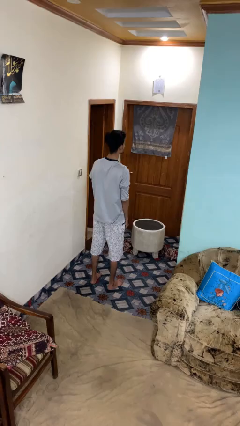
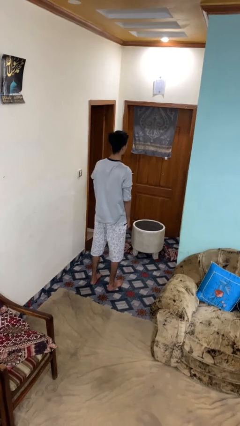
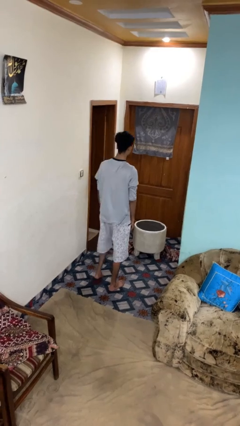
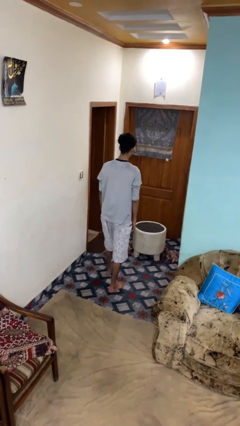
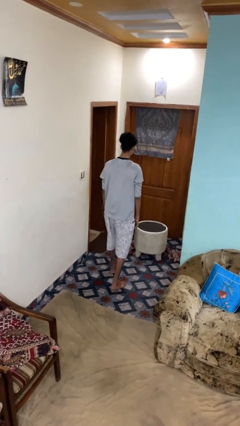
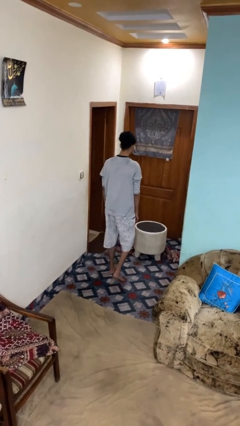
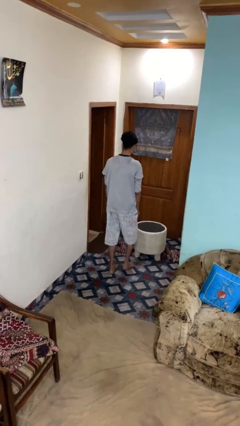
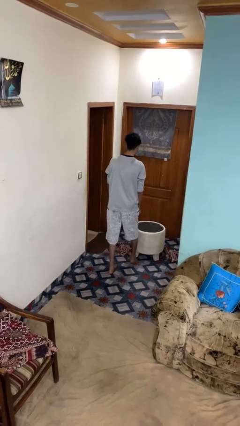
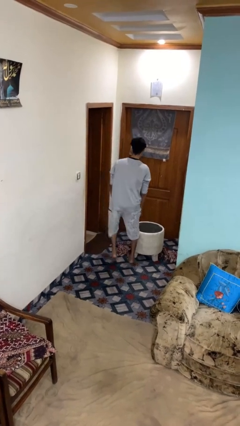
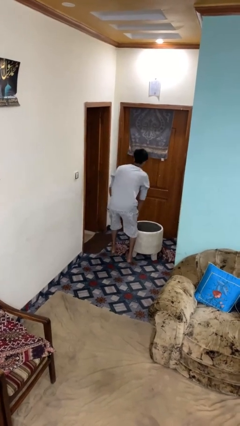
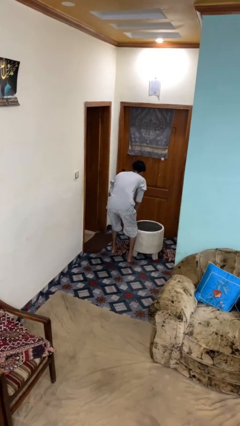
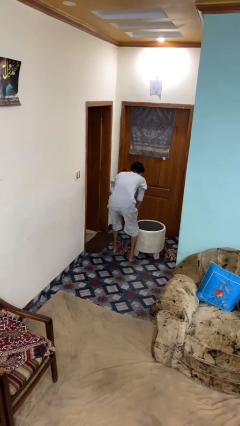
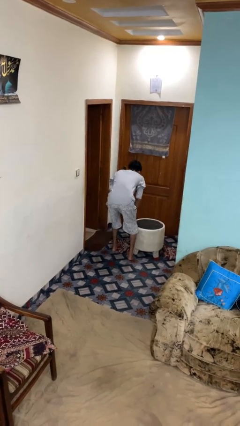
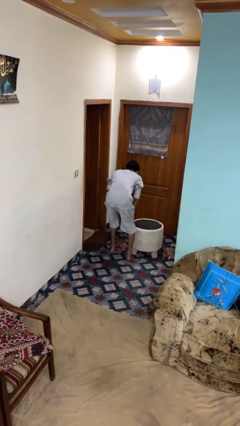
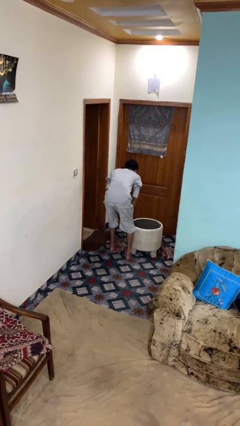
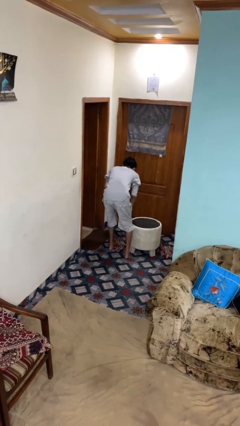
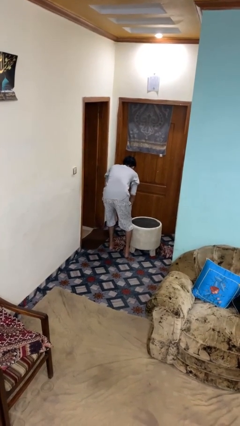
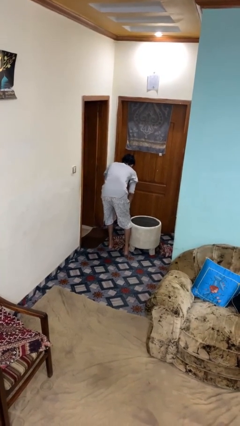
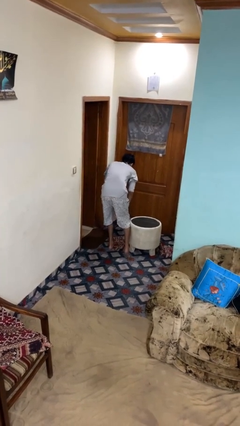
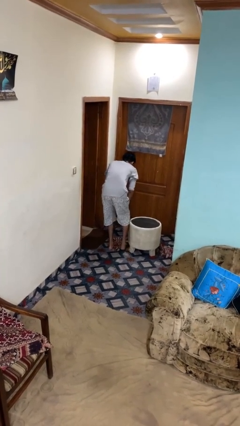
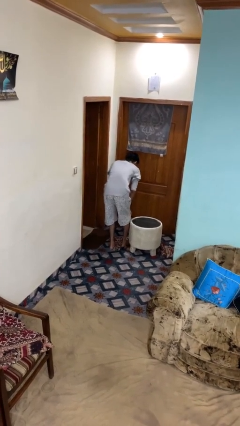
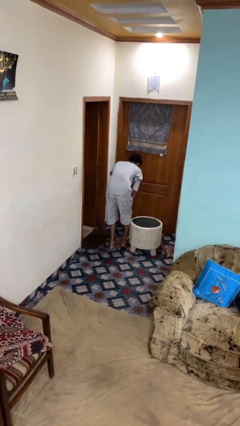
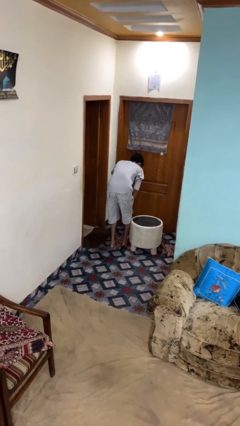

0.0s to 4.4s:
person bumps into table

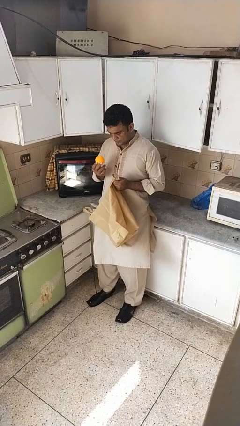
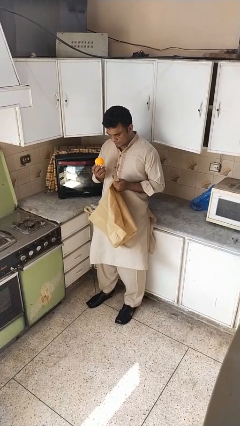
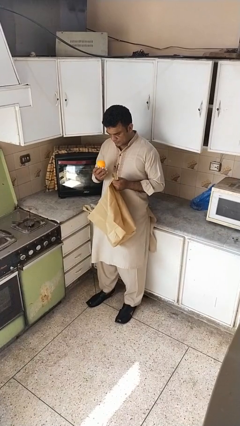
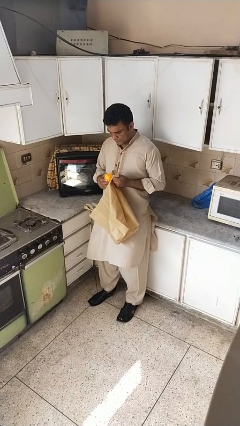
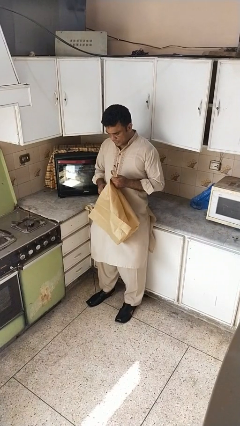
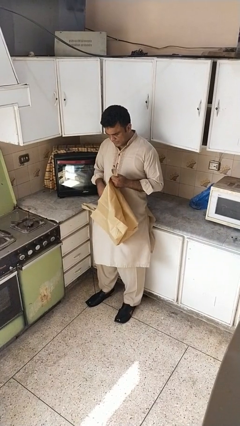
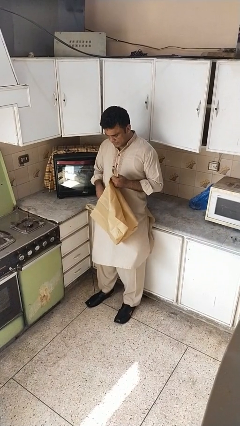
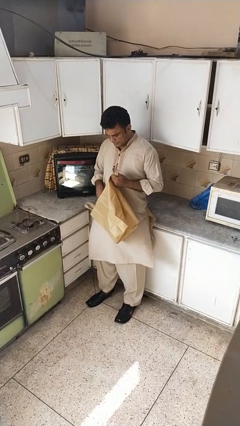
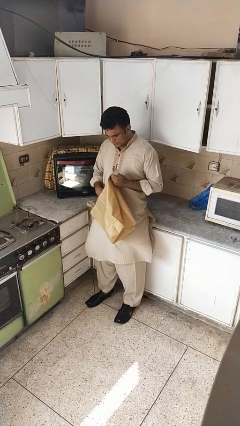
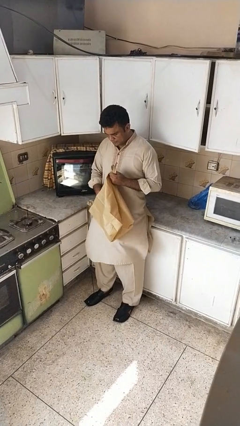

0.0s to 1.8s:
person puts object into bag

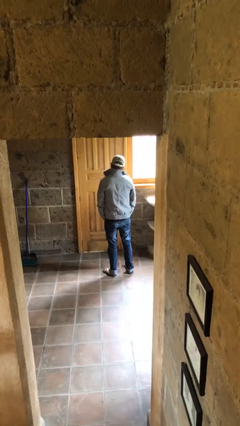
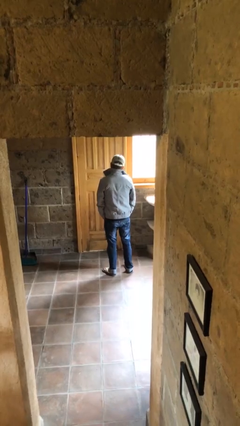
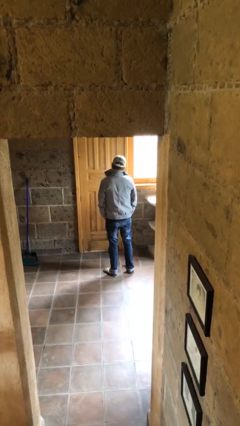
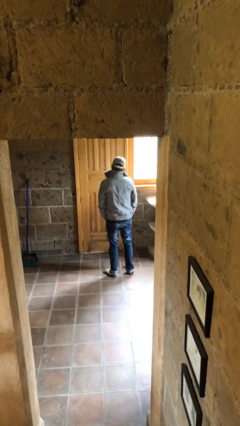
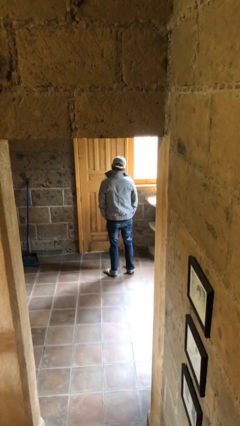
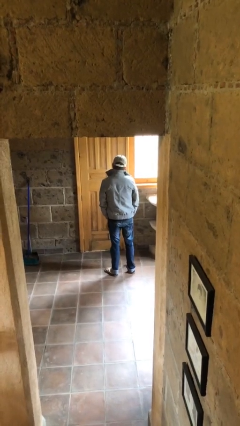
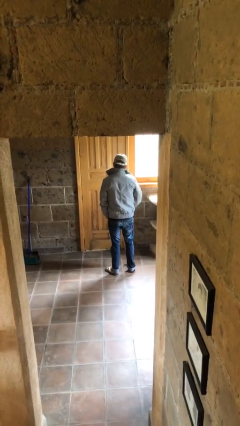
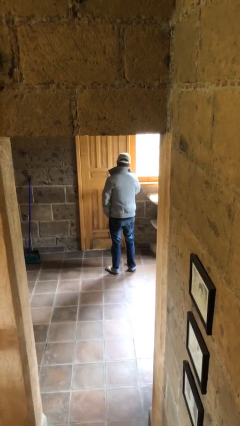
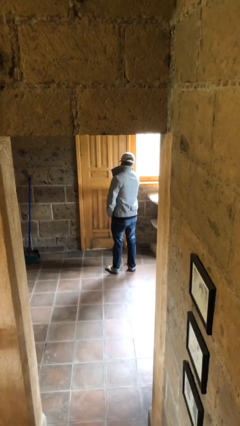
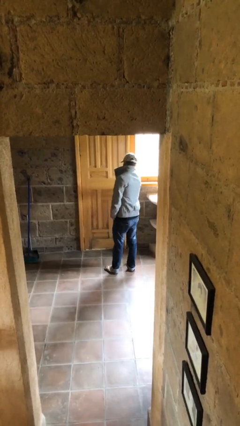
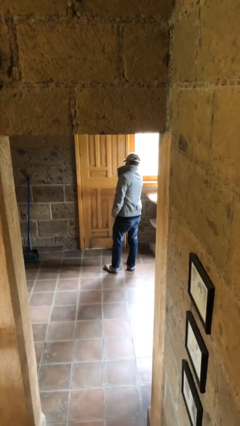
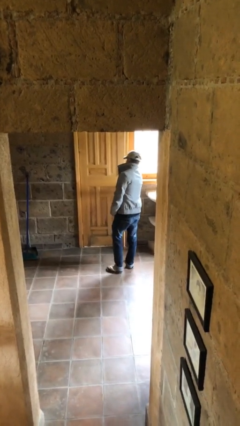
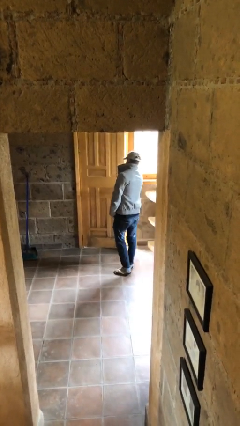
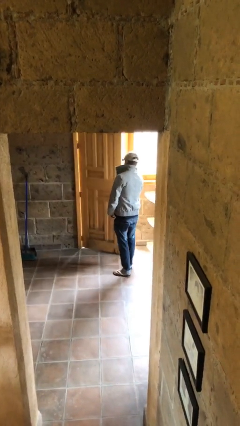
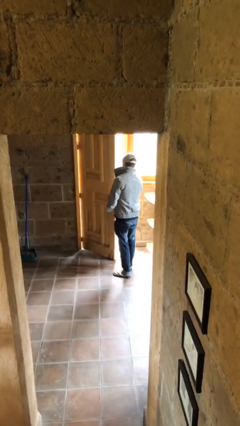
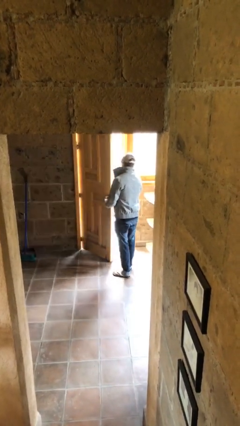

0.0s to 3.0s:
person opens facility door

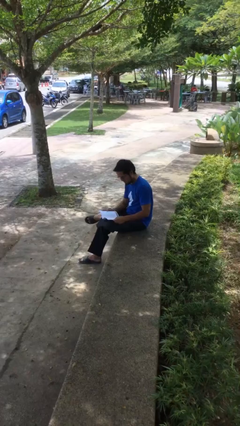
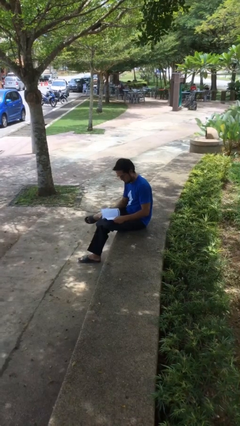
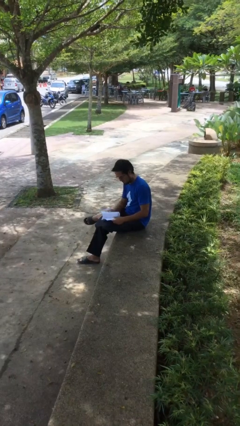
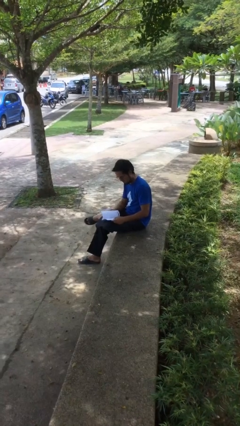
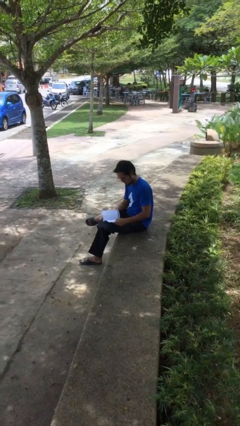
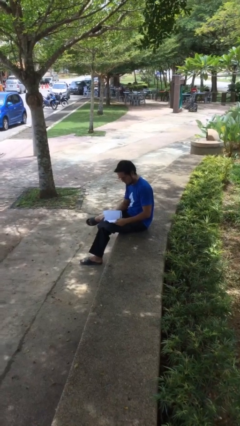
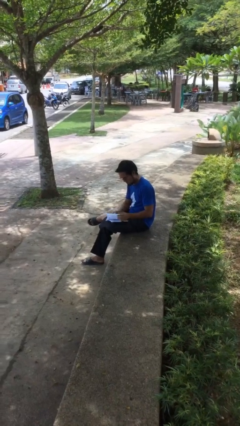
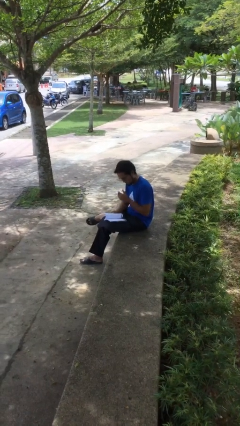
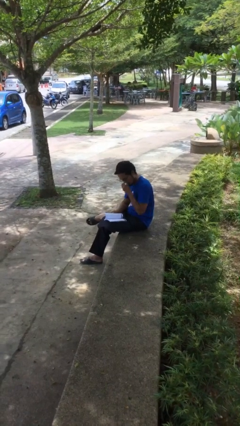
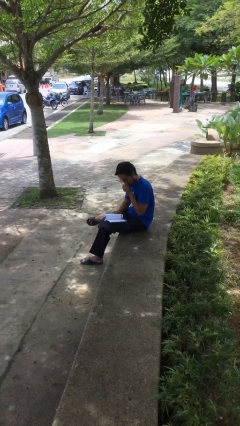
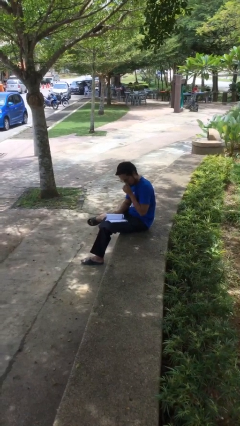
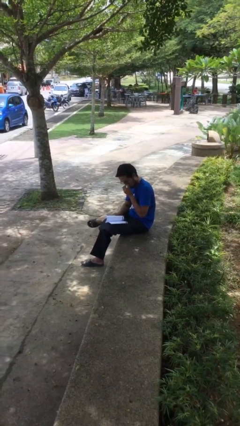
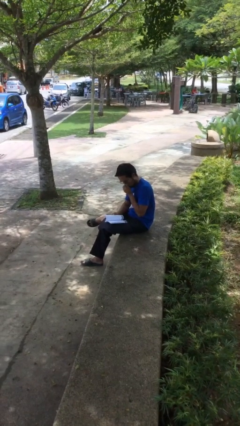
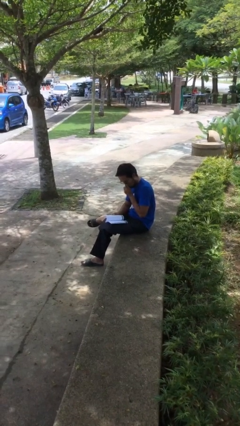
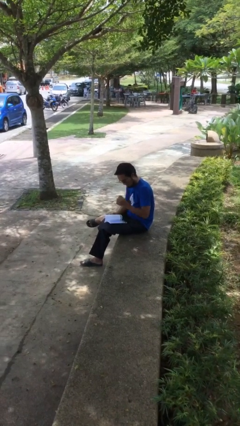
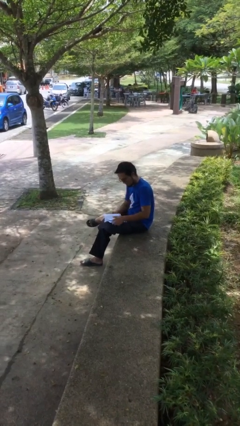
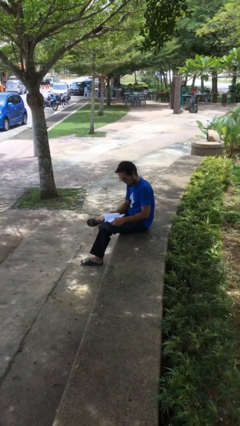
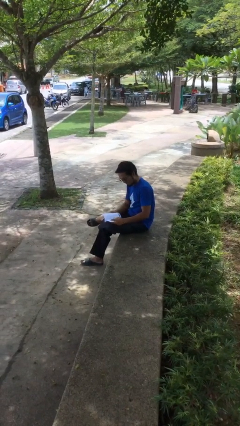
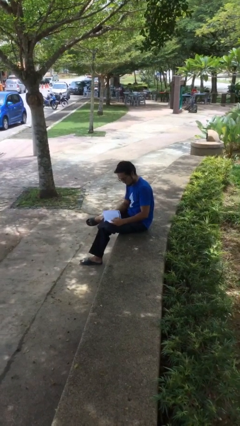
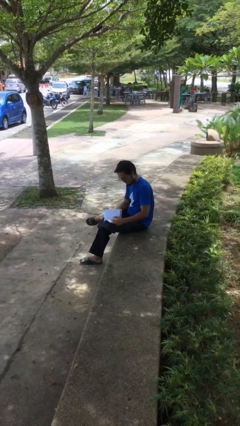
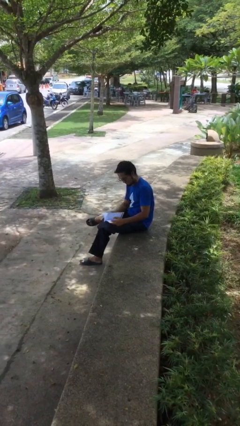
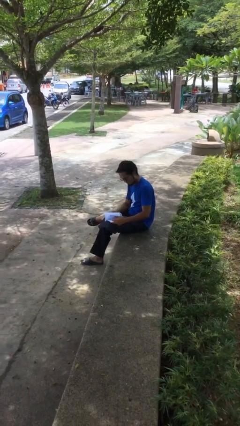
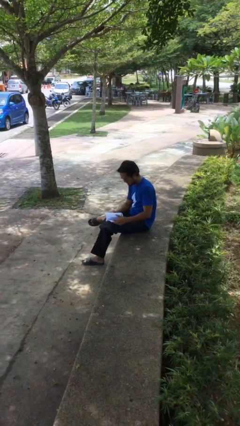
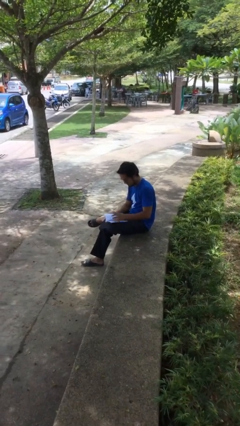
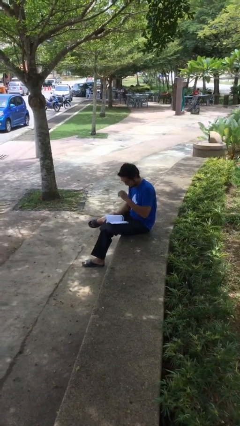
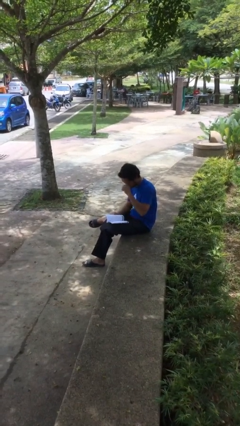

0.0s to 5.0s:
person reads document

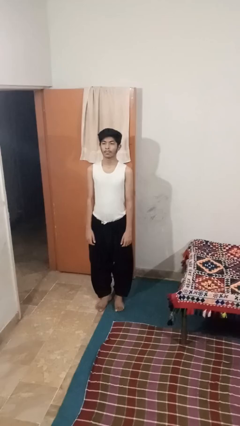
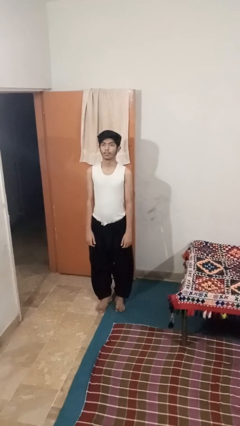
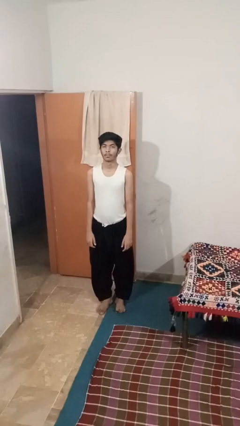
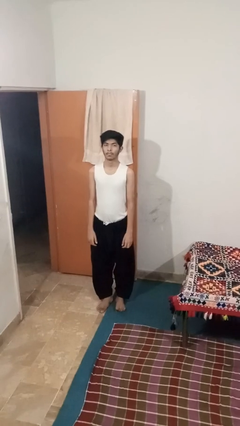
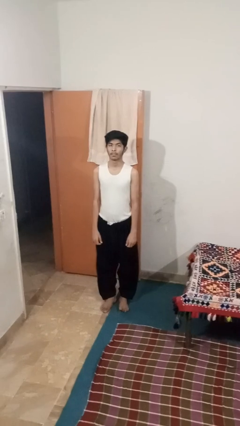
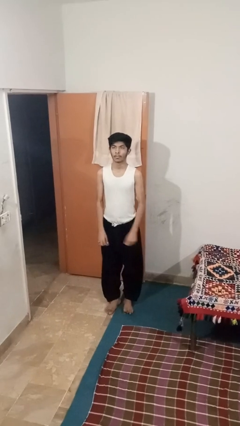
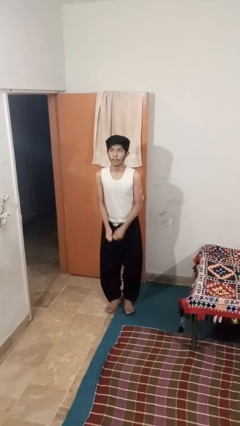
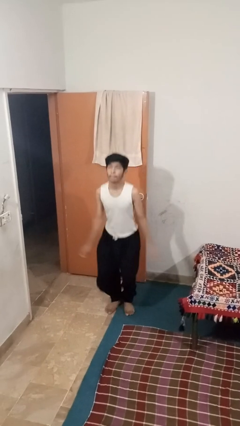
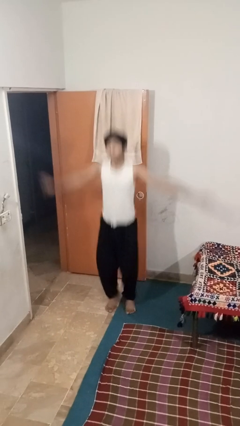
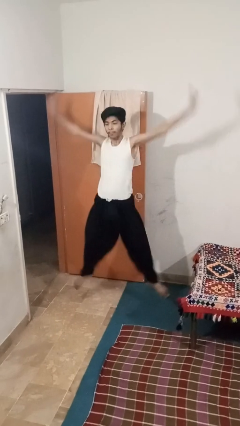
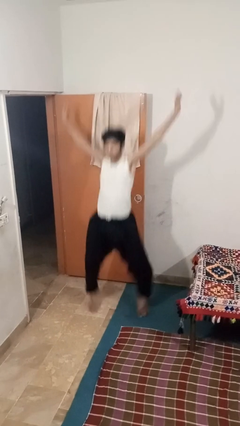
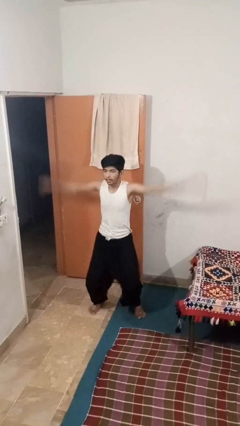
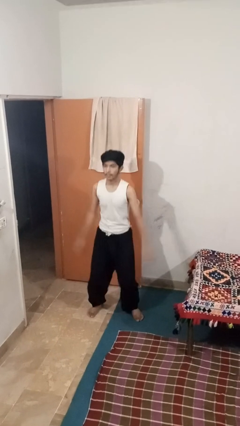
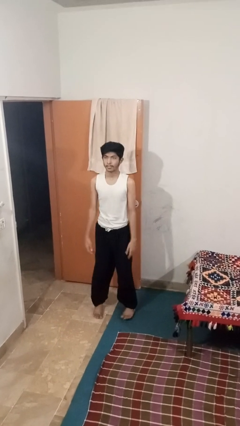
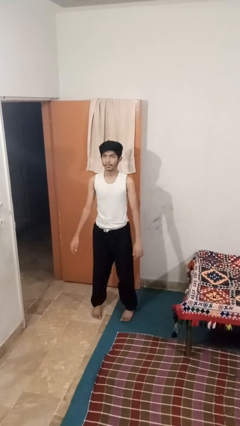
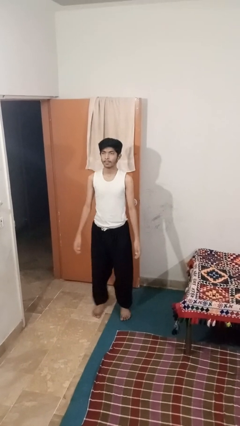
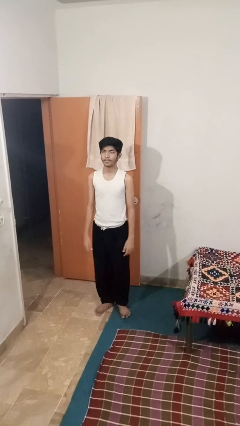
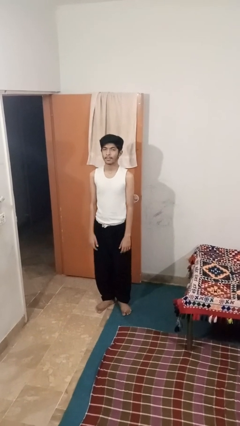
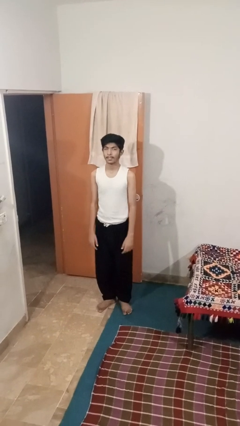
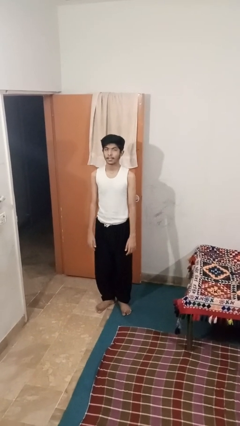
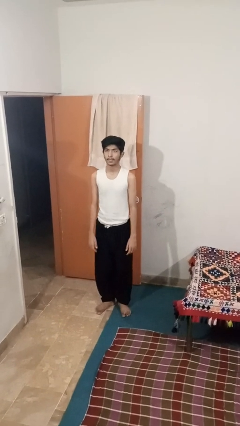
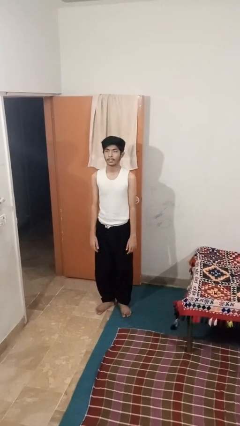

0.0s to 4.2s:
person exercises with jumping jacks
